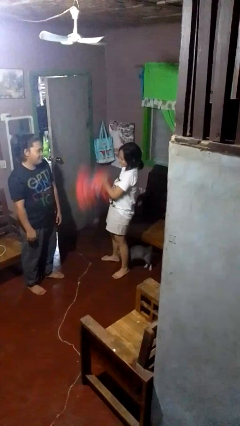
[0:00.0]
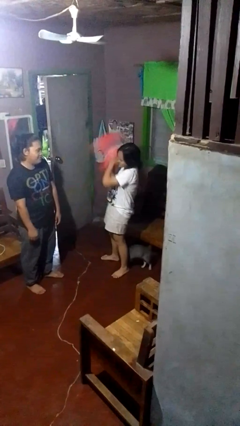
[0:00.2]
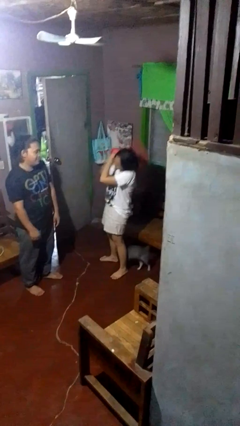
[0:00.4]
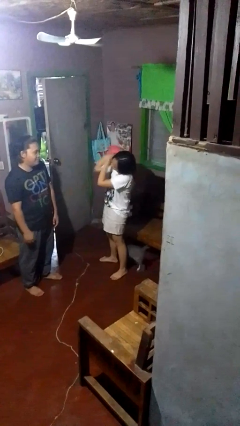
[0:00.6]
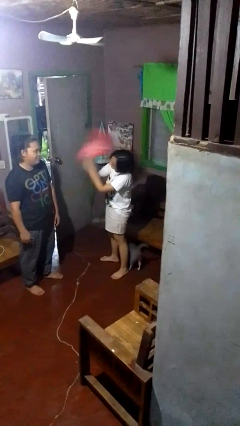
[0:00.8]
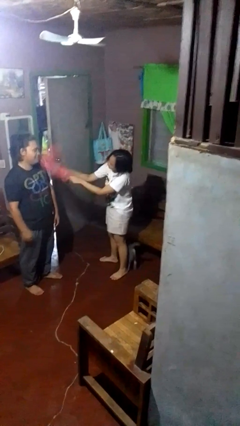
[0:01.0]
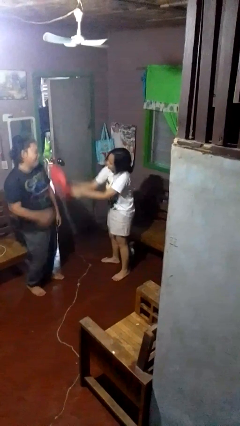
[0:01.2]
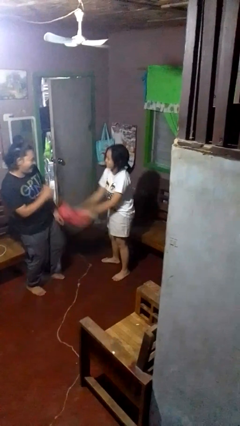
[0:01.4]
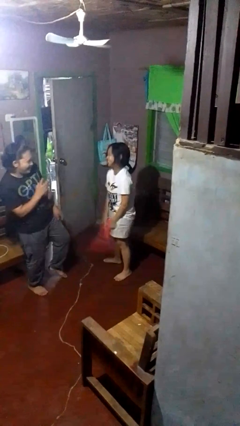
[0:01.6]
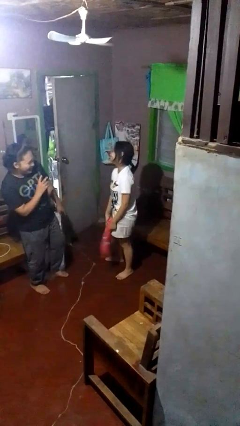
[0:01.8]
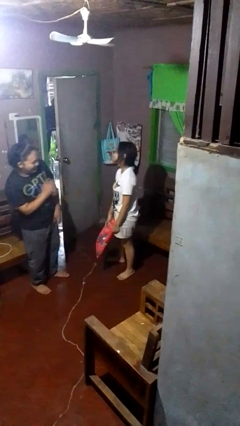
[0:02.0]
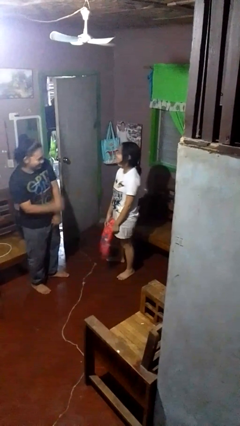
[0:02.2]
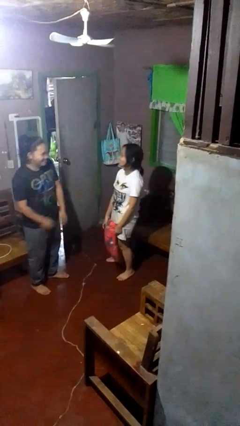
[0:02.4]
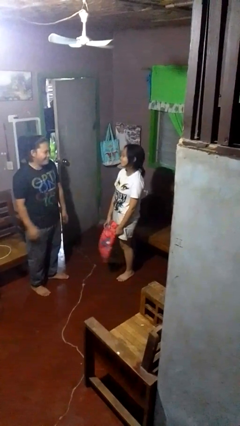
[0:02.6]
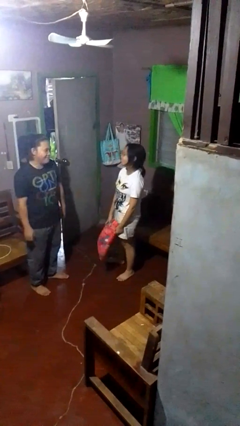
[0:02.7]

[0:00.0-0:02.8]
person hits person with pillow

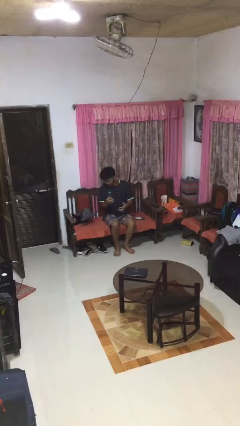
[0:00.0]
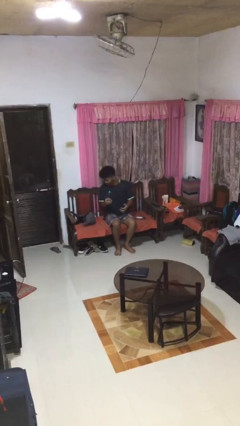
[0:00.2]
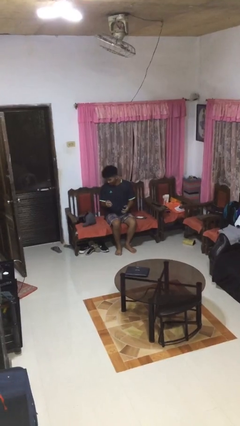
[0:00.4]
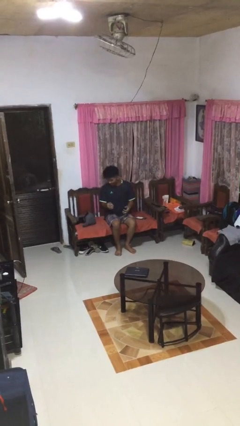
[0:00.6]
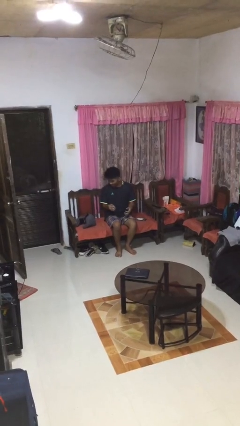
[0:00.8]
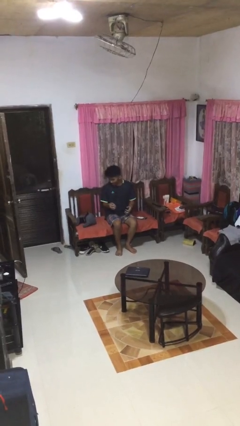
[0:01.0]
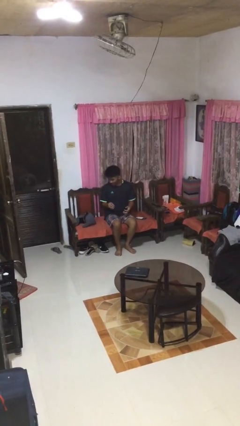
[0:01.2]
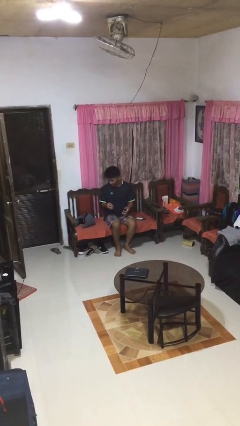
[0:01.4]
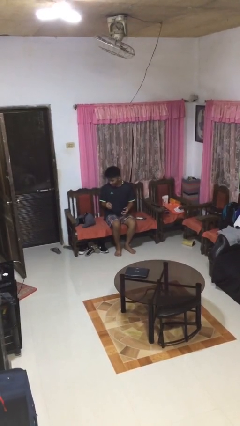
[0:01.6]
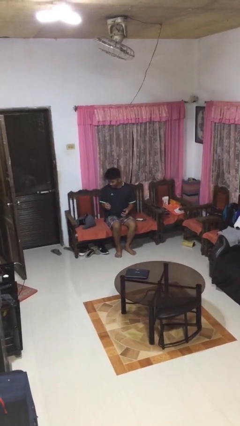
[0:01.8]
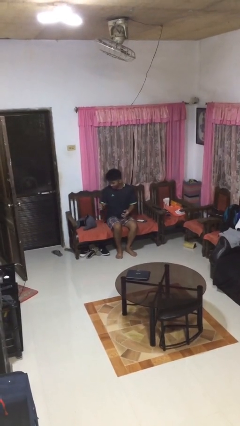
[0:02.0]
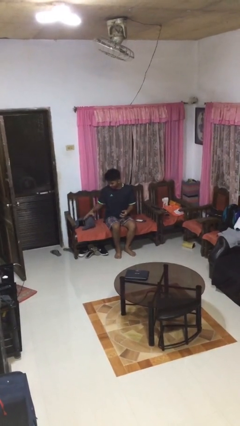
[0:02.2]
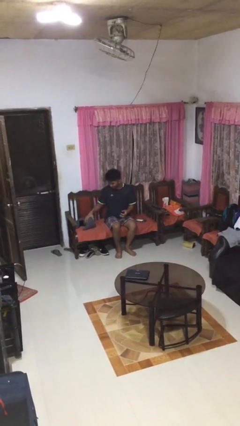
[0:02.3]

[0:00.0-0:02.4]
person drops object

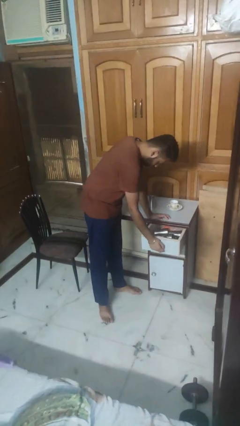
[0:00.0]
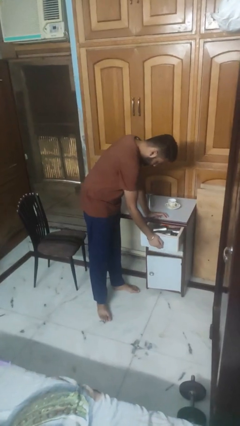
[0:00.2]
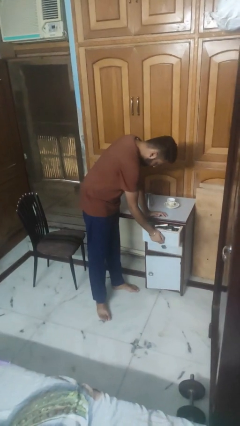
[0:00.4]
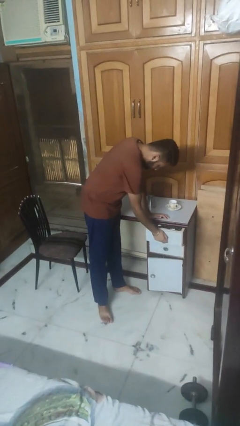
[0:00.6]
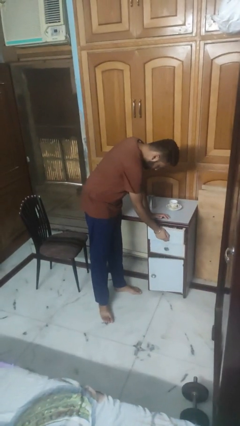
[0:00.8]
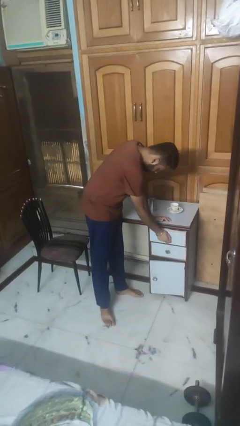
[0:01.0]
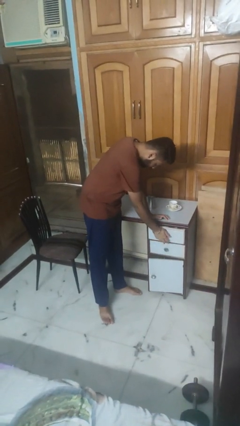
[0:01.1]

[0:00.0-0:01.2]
person closes kitchen drawer

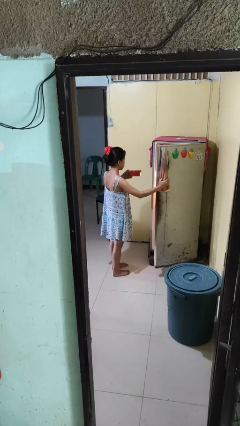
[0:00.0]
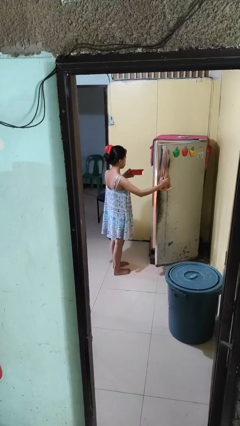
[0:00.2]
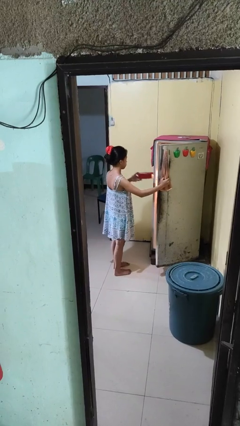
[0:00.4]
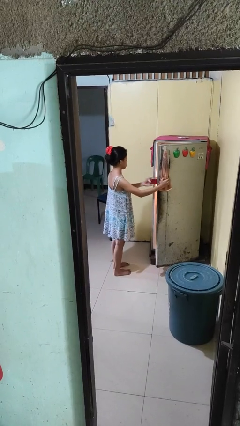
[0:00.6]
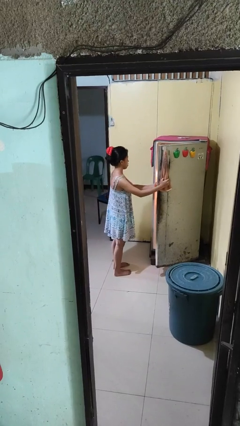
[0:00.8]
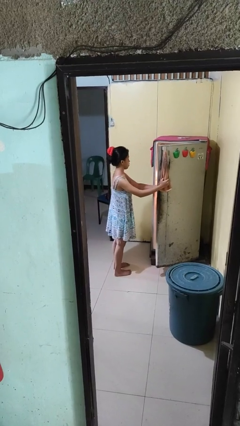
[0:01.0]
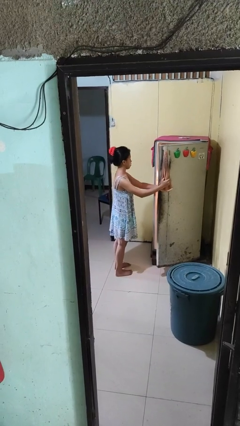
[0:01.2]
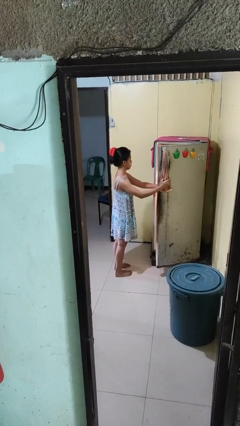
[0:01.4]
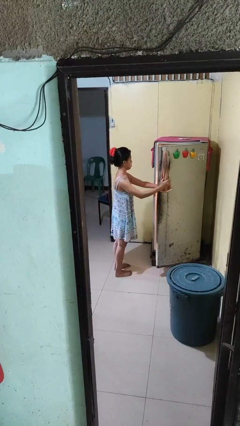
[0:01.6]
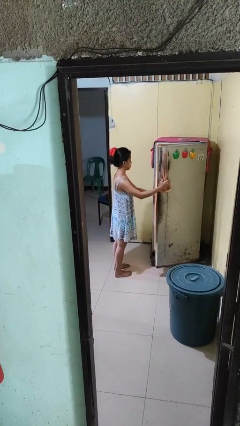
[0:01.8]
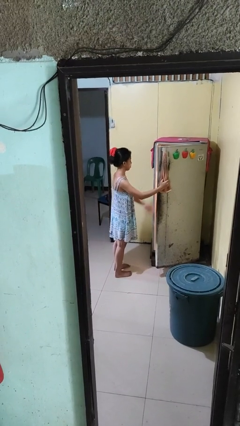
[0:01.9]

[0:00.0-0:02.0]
person puts object into refrigerator

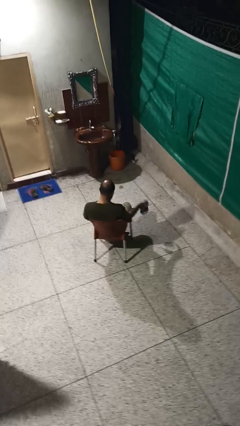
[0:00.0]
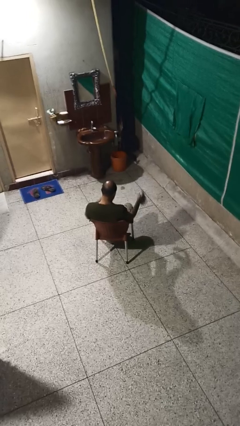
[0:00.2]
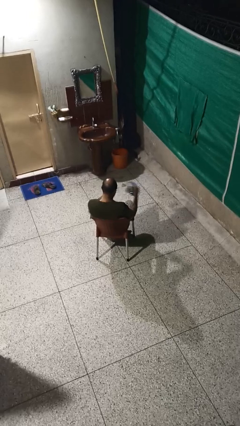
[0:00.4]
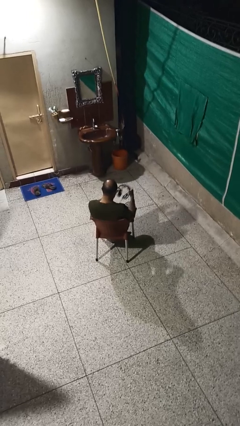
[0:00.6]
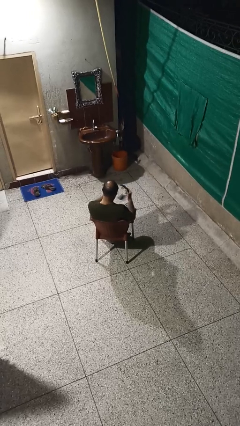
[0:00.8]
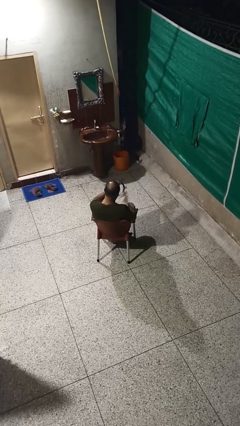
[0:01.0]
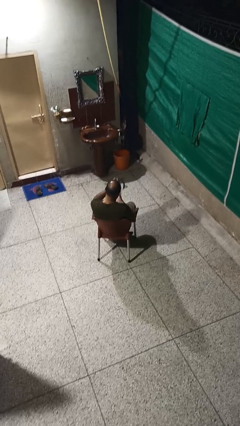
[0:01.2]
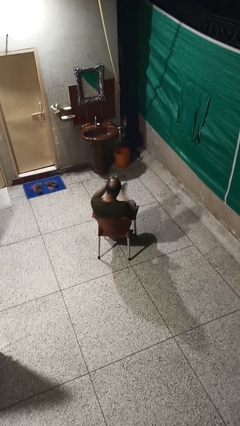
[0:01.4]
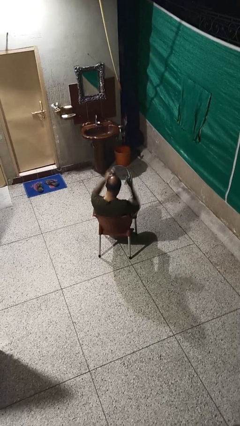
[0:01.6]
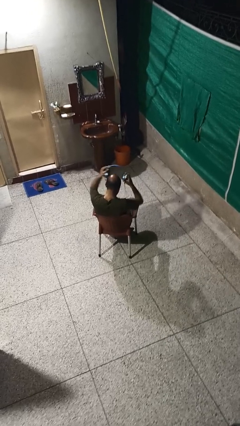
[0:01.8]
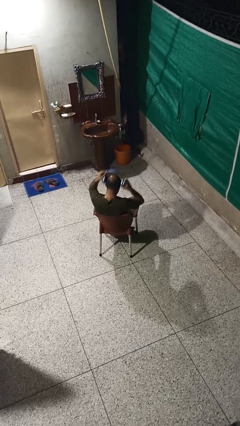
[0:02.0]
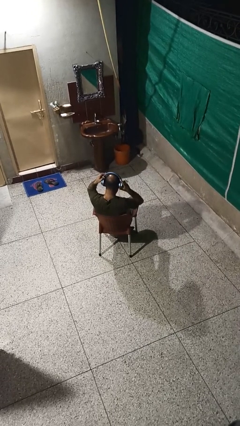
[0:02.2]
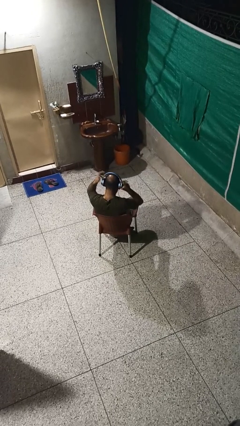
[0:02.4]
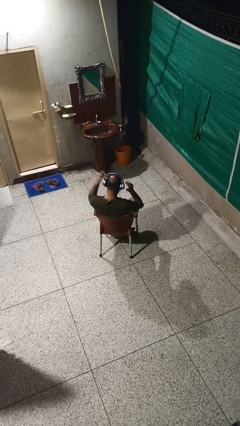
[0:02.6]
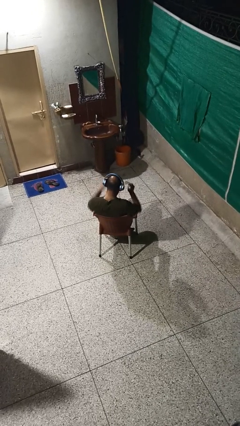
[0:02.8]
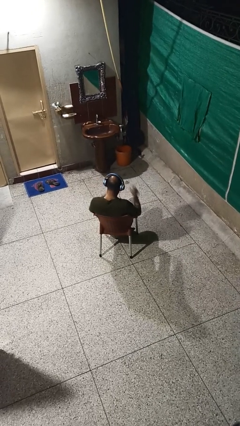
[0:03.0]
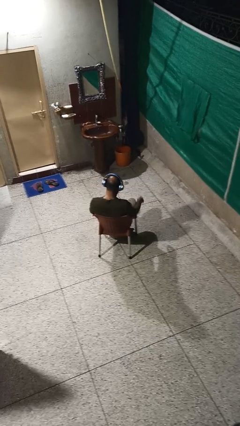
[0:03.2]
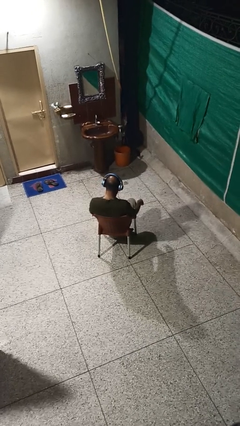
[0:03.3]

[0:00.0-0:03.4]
person puts on headphones

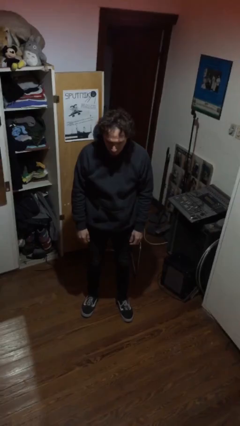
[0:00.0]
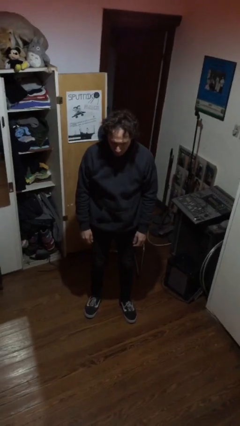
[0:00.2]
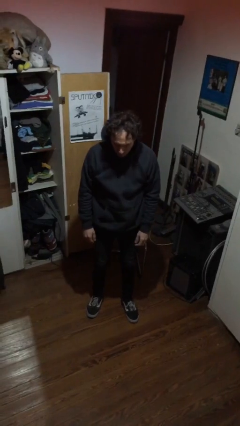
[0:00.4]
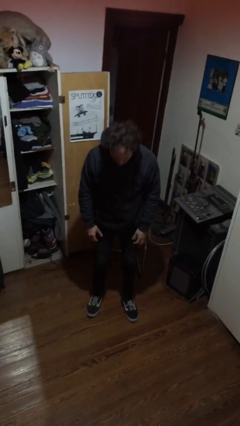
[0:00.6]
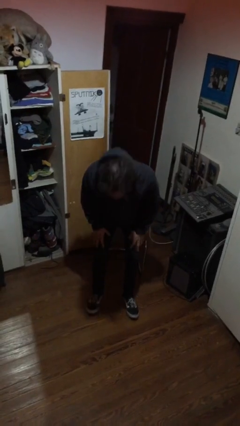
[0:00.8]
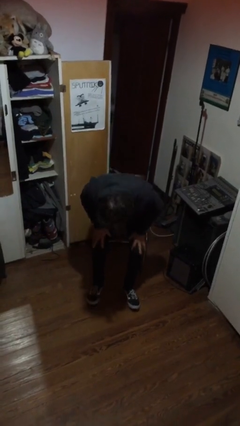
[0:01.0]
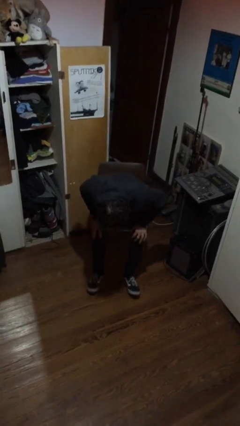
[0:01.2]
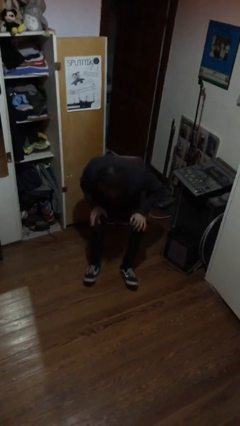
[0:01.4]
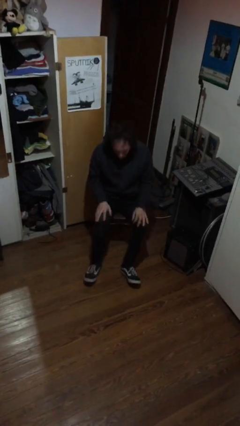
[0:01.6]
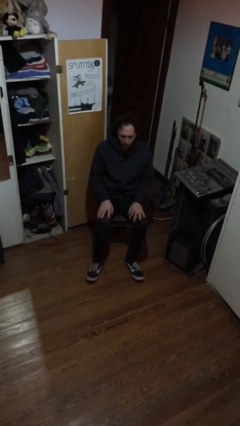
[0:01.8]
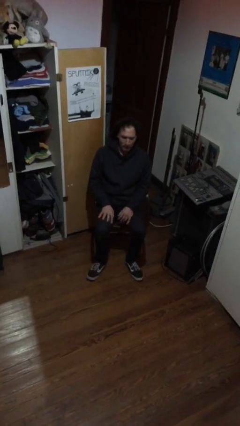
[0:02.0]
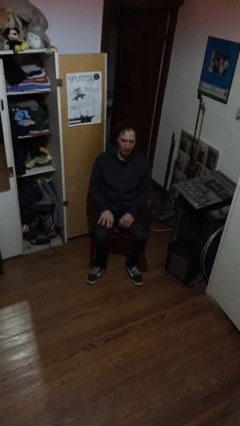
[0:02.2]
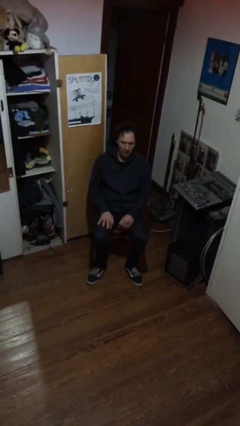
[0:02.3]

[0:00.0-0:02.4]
person sits down

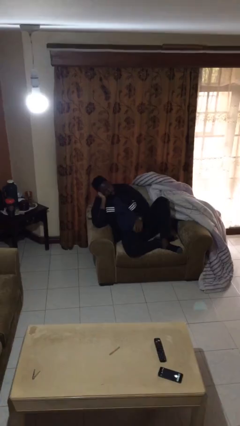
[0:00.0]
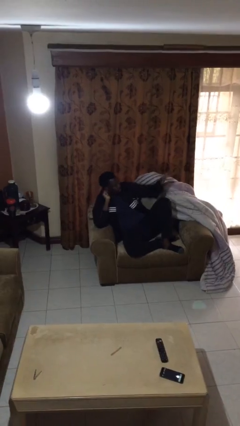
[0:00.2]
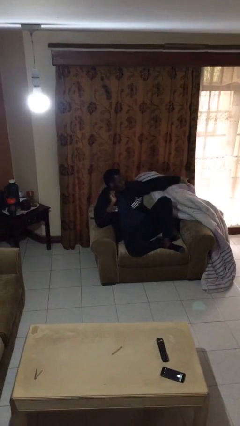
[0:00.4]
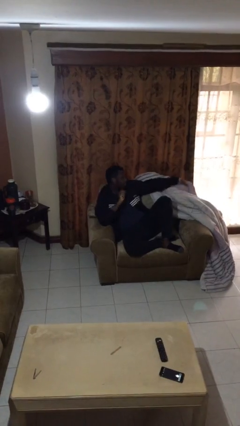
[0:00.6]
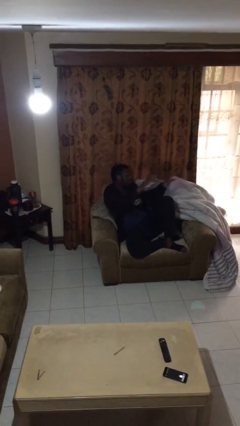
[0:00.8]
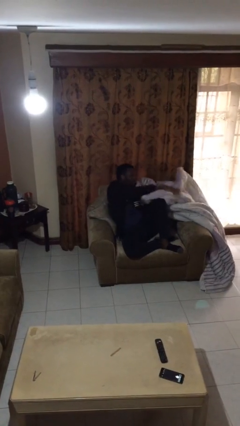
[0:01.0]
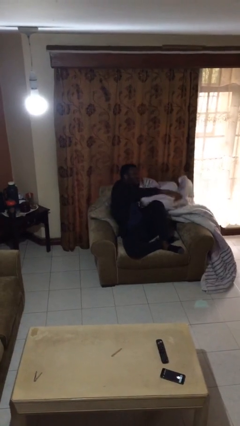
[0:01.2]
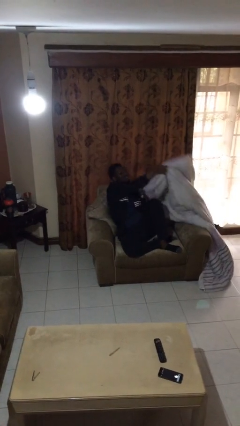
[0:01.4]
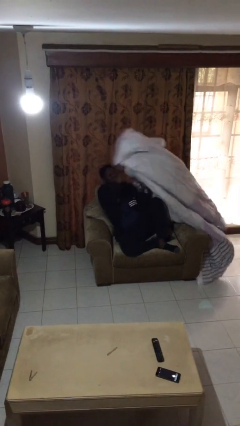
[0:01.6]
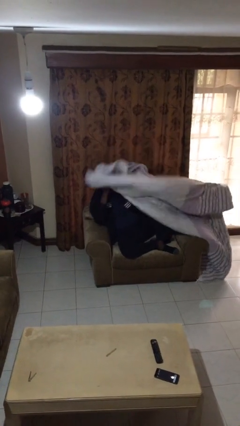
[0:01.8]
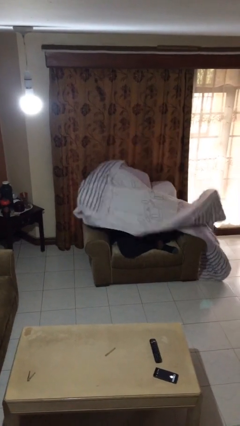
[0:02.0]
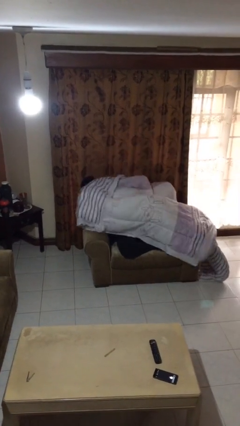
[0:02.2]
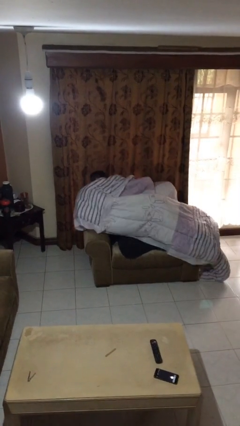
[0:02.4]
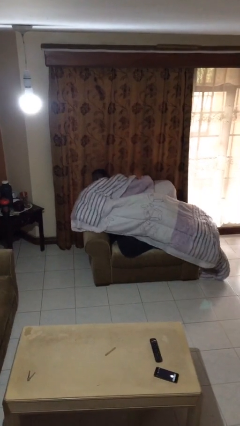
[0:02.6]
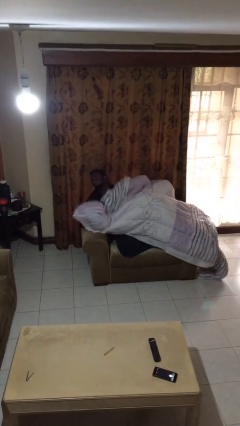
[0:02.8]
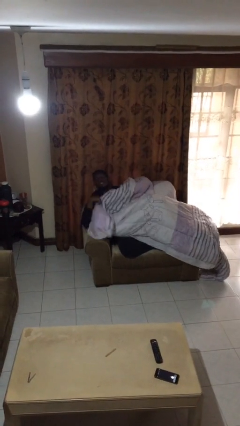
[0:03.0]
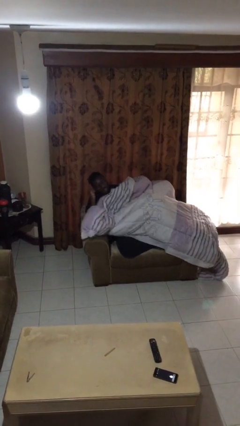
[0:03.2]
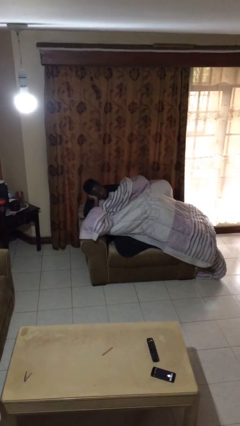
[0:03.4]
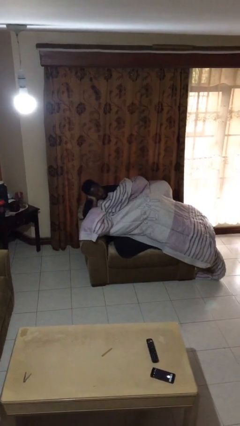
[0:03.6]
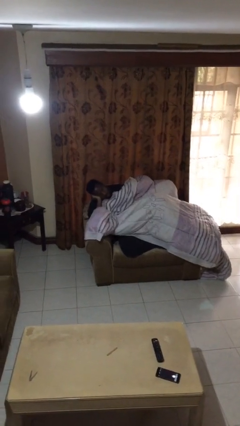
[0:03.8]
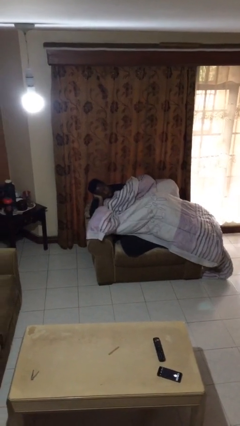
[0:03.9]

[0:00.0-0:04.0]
person covers with blanket
